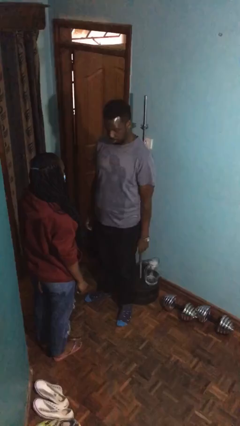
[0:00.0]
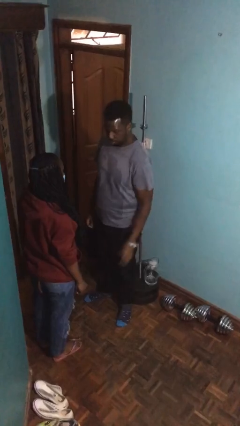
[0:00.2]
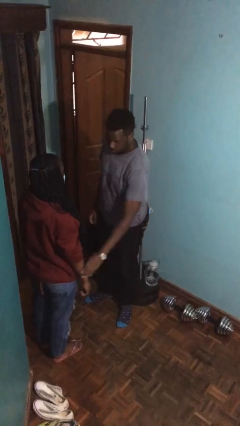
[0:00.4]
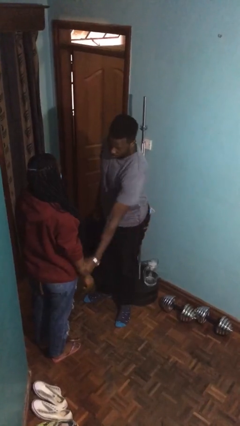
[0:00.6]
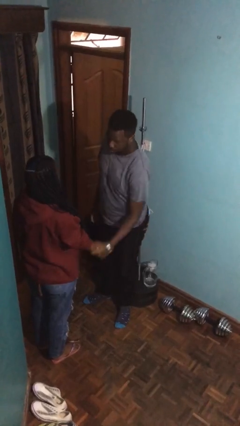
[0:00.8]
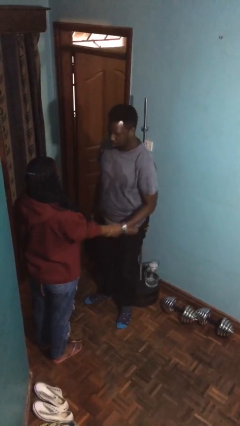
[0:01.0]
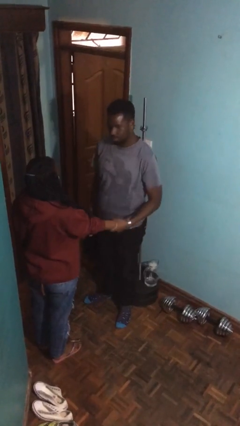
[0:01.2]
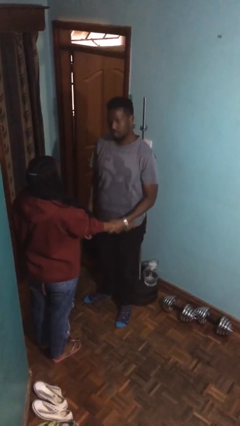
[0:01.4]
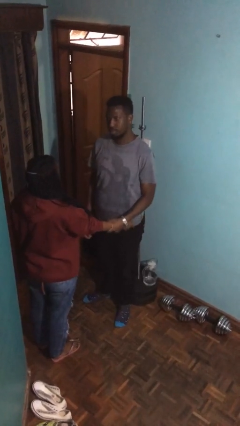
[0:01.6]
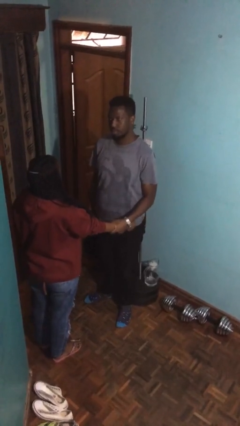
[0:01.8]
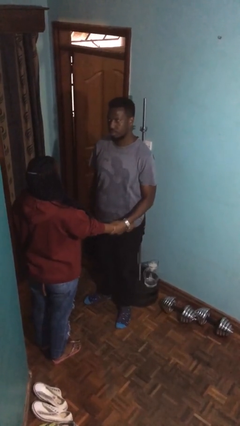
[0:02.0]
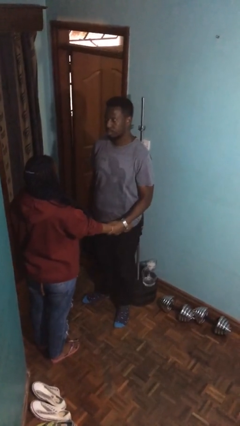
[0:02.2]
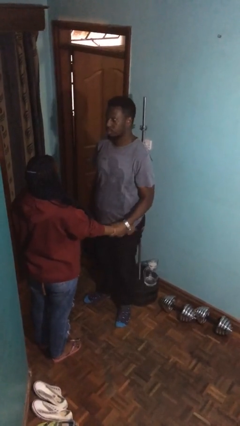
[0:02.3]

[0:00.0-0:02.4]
person grabs person by forearm

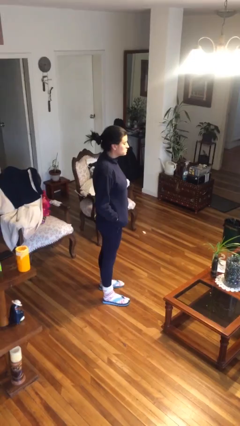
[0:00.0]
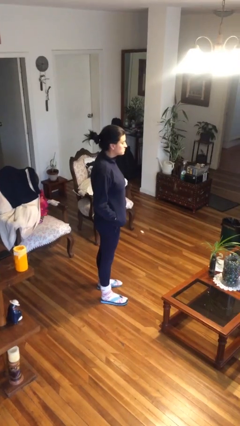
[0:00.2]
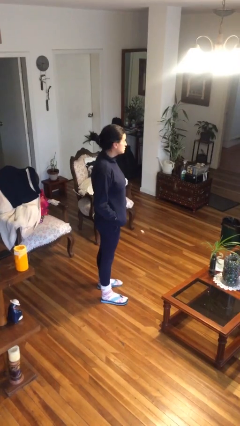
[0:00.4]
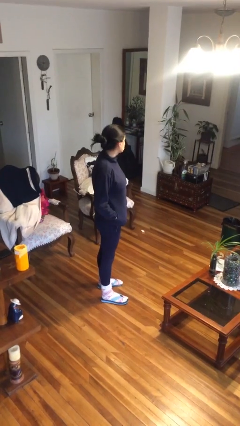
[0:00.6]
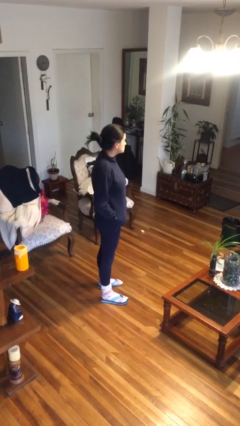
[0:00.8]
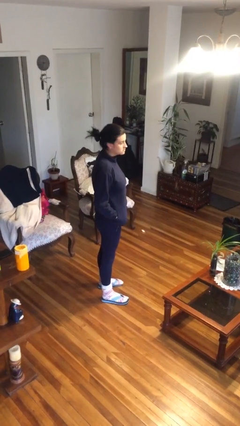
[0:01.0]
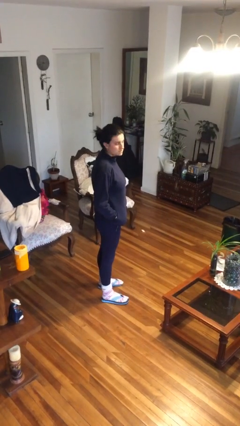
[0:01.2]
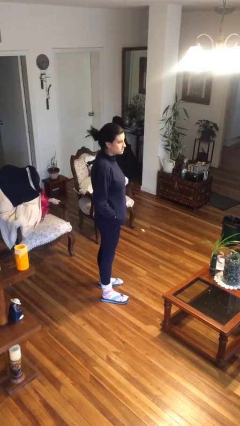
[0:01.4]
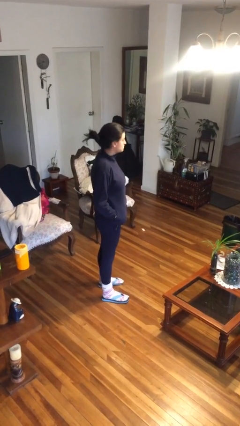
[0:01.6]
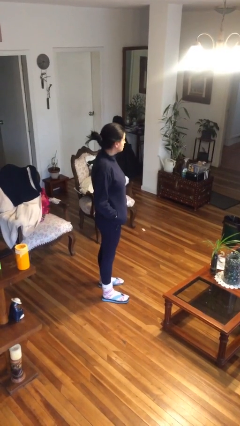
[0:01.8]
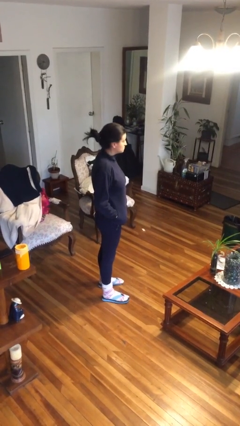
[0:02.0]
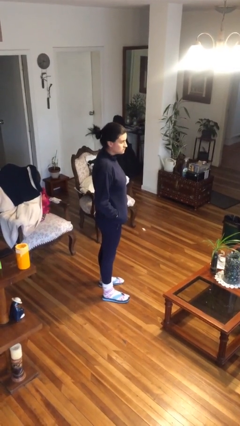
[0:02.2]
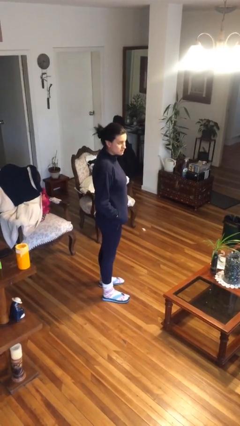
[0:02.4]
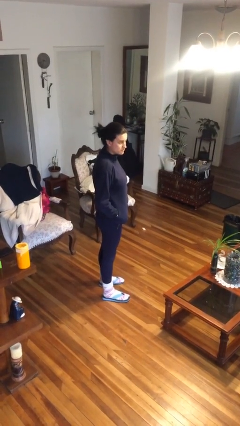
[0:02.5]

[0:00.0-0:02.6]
person shakes head

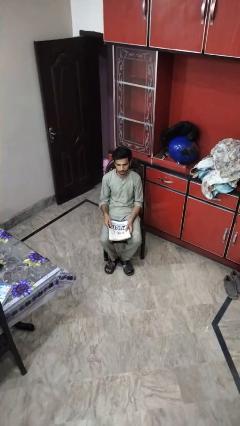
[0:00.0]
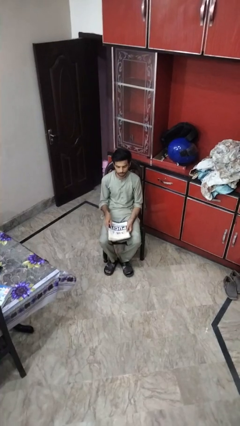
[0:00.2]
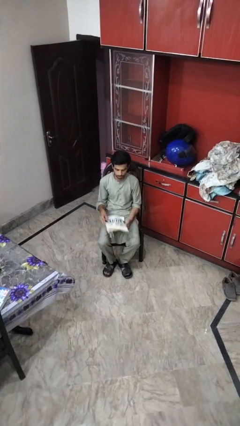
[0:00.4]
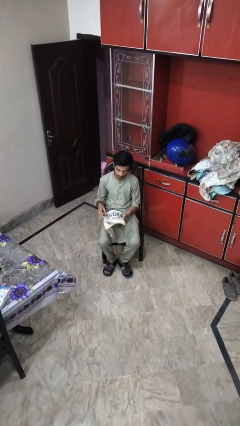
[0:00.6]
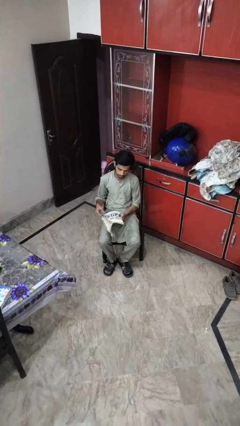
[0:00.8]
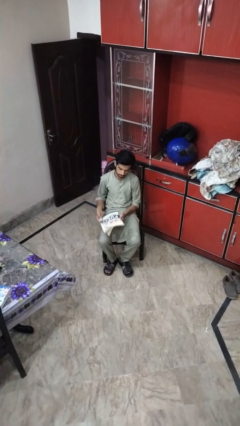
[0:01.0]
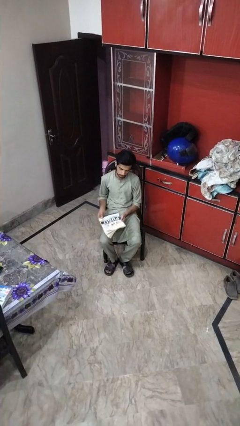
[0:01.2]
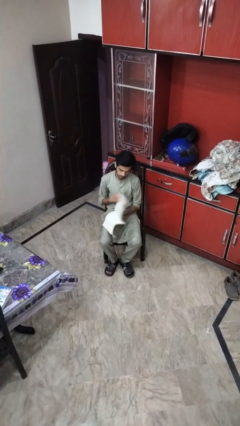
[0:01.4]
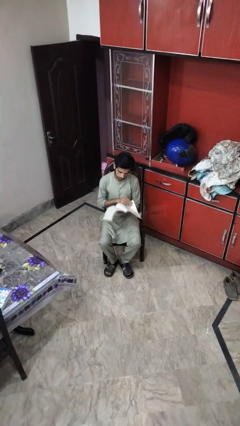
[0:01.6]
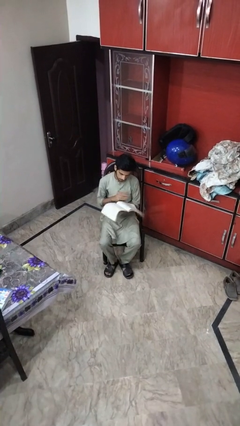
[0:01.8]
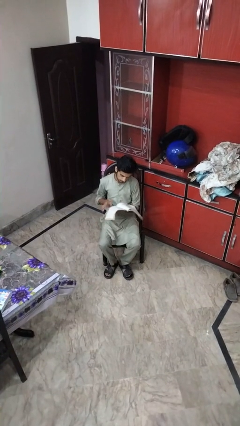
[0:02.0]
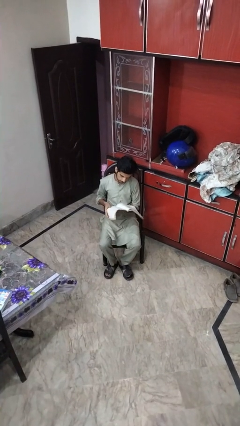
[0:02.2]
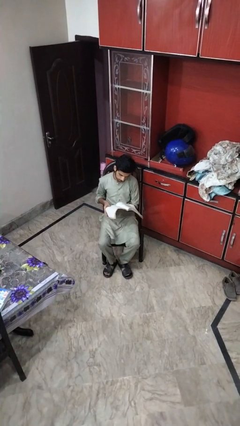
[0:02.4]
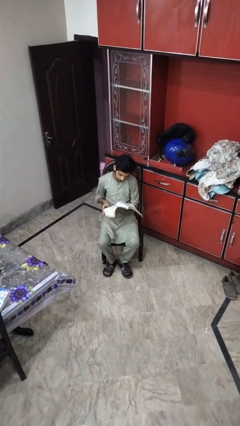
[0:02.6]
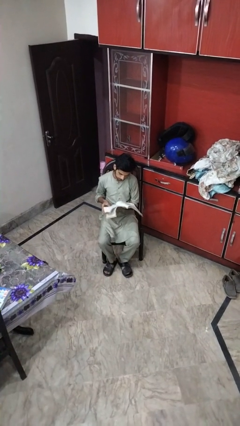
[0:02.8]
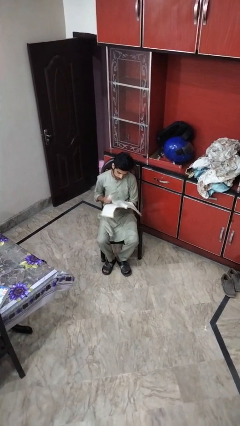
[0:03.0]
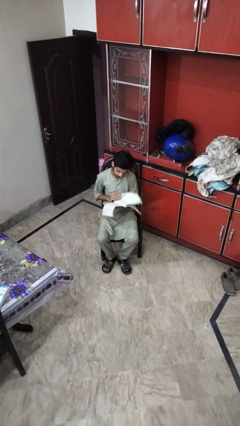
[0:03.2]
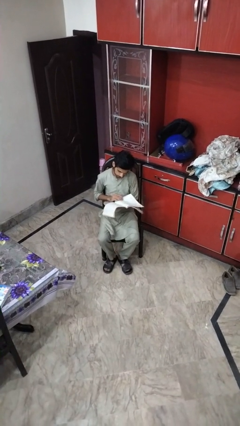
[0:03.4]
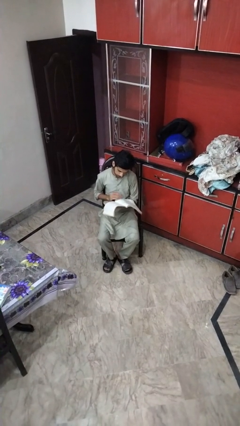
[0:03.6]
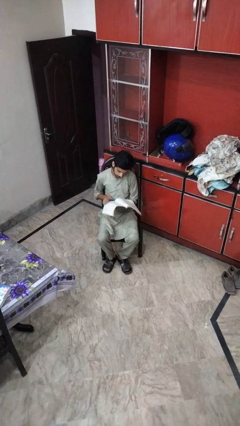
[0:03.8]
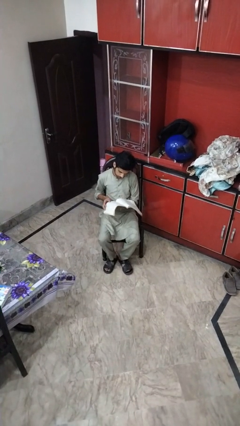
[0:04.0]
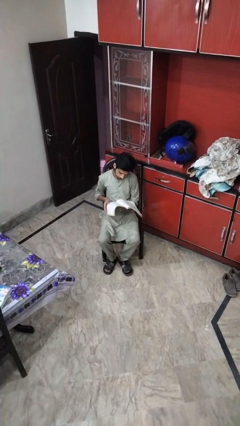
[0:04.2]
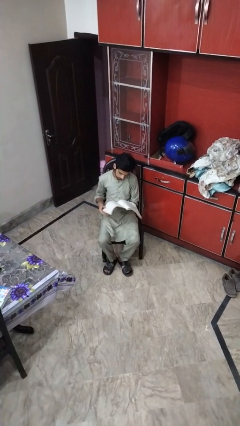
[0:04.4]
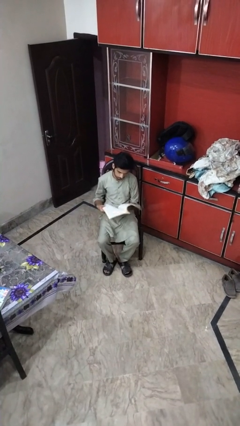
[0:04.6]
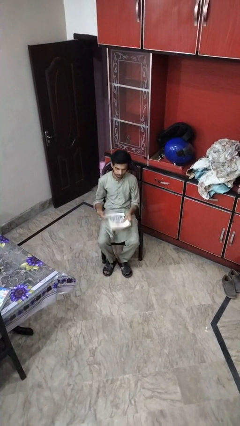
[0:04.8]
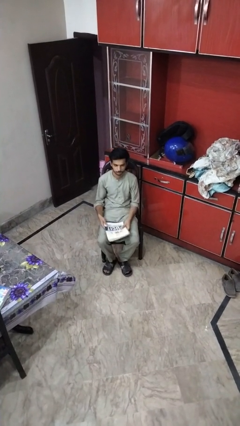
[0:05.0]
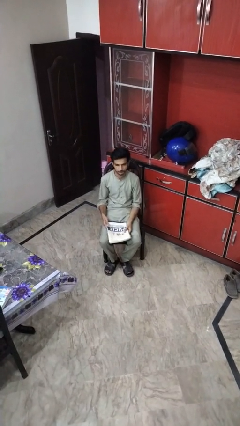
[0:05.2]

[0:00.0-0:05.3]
person reads magazine

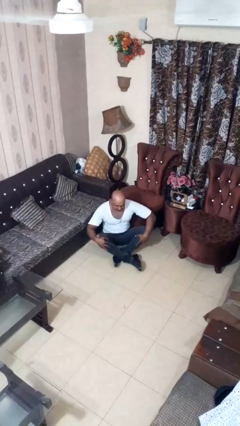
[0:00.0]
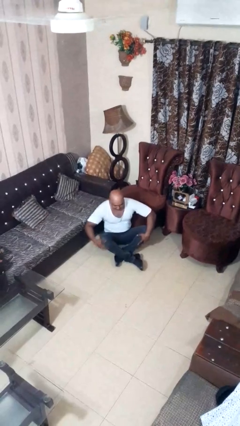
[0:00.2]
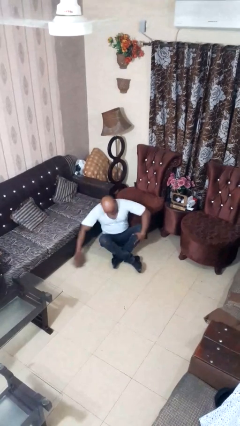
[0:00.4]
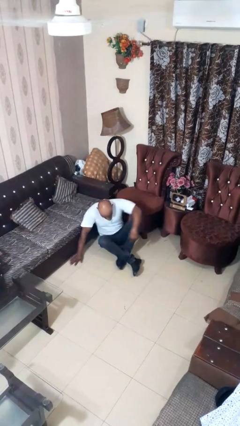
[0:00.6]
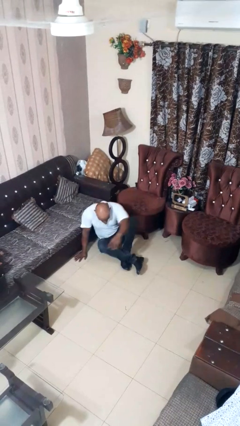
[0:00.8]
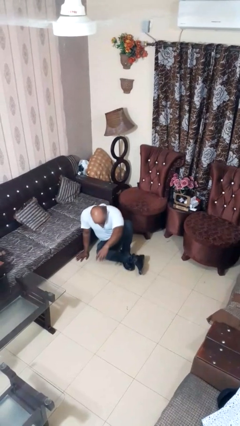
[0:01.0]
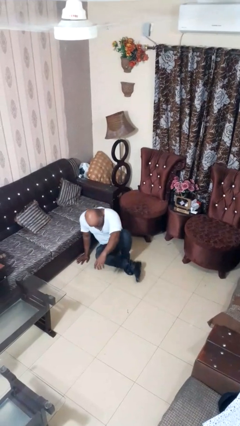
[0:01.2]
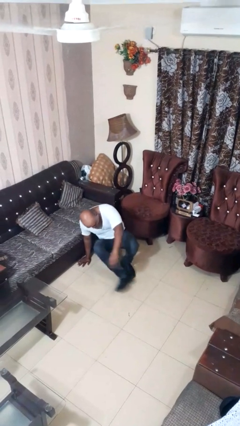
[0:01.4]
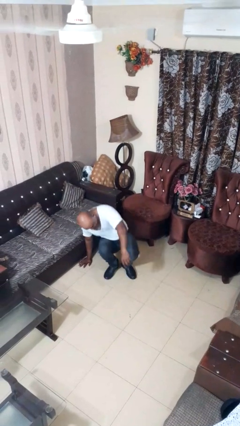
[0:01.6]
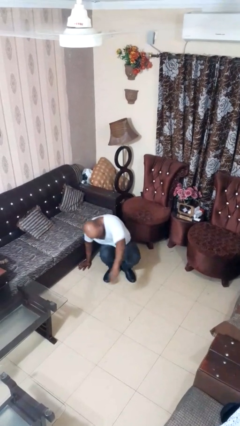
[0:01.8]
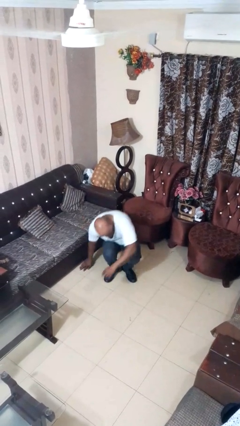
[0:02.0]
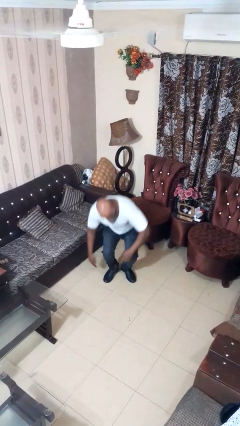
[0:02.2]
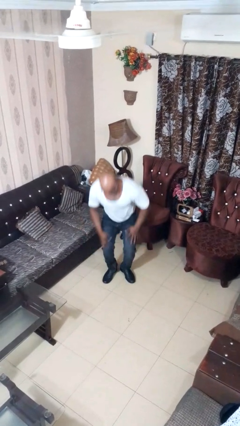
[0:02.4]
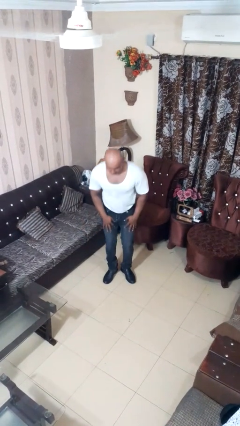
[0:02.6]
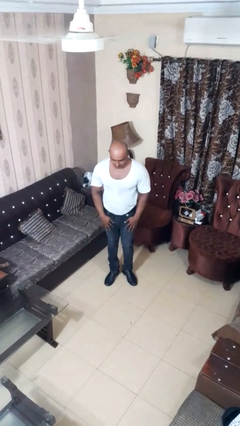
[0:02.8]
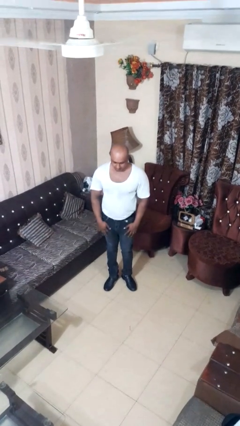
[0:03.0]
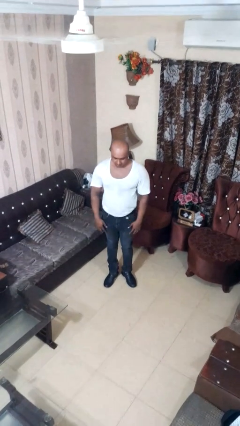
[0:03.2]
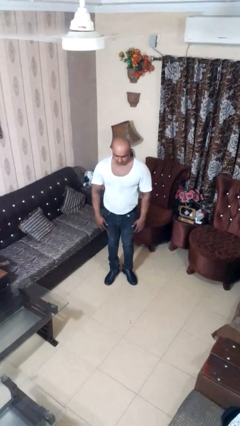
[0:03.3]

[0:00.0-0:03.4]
person stands up from floor

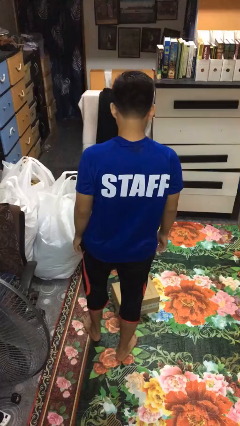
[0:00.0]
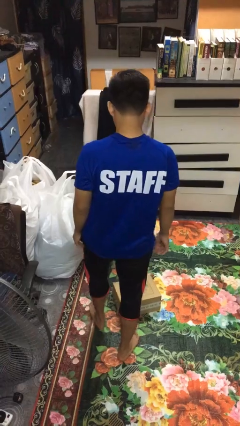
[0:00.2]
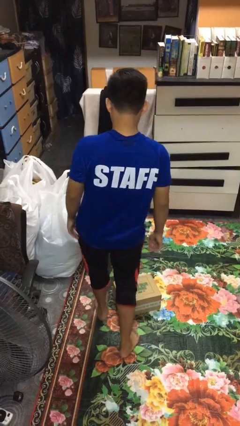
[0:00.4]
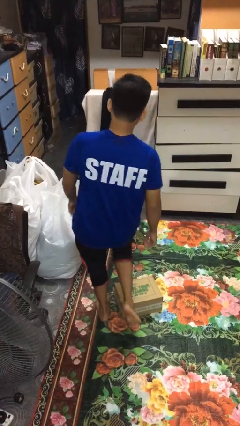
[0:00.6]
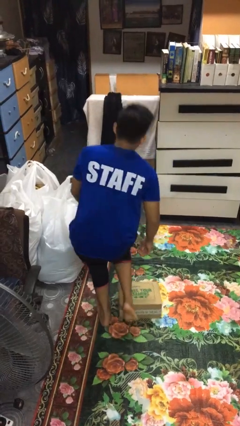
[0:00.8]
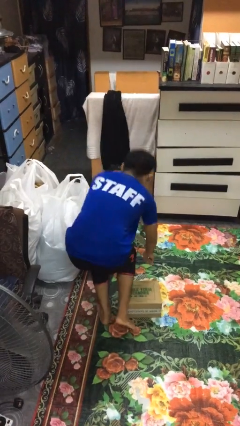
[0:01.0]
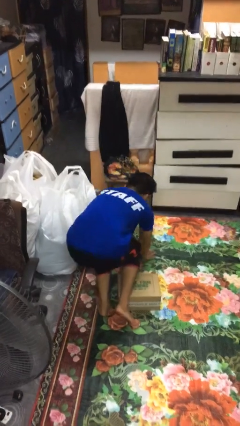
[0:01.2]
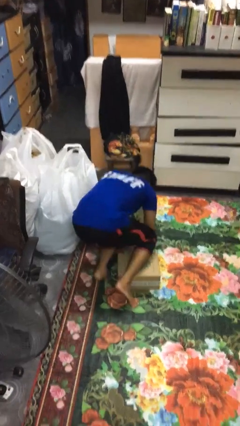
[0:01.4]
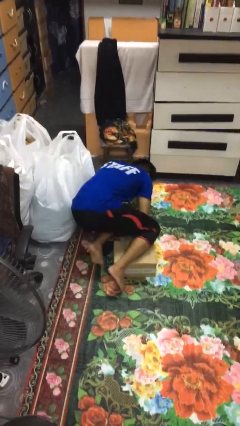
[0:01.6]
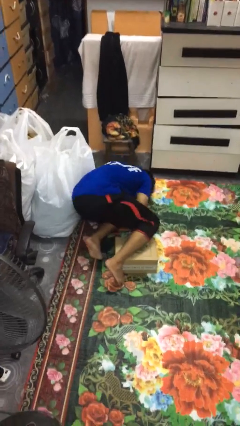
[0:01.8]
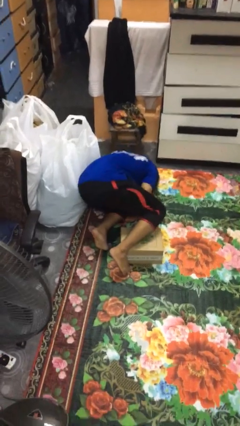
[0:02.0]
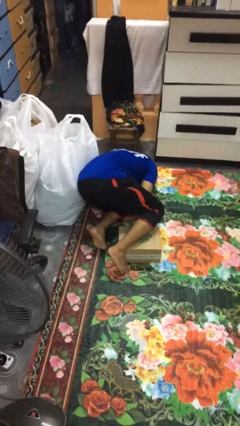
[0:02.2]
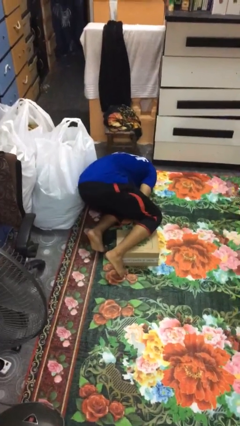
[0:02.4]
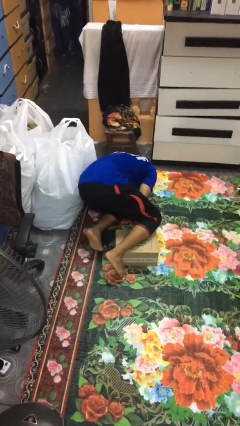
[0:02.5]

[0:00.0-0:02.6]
person trips on object on floor

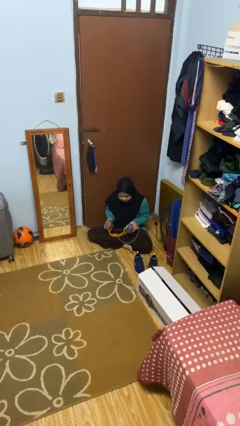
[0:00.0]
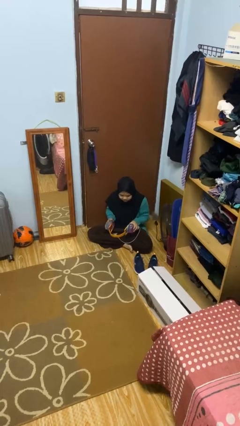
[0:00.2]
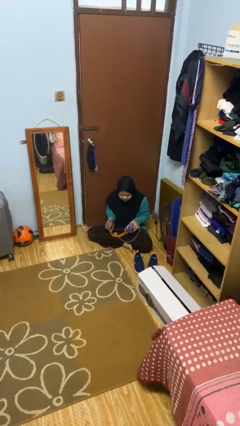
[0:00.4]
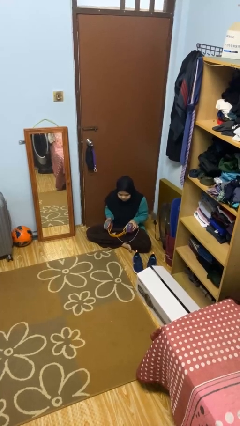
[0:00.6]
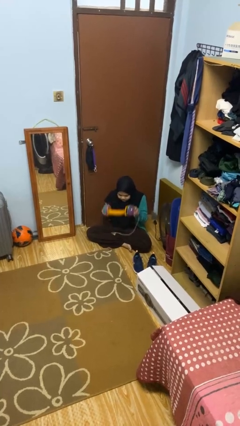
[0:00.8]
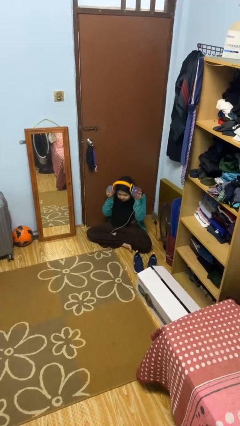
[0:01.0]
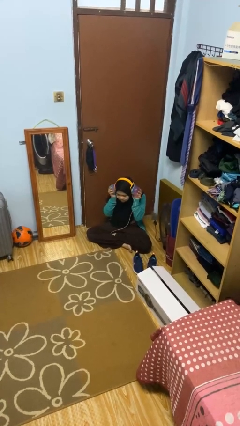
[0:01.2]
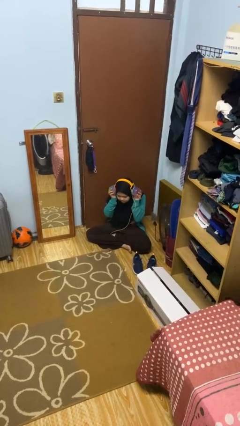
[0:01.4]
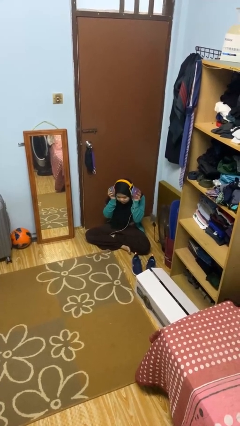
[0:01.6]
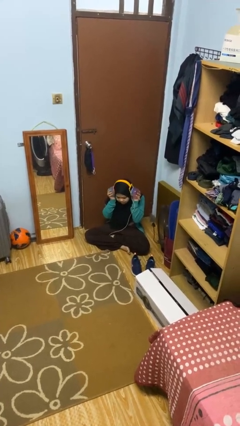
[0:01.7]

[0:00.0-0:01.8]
person puts on headphones
